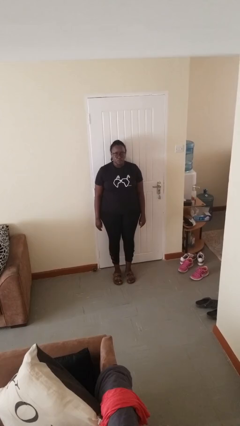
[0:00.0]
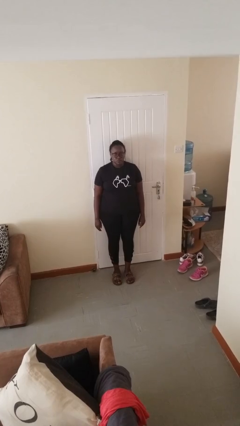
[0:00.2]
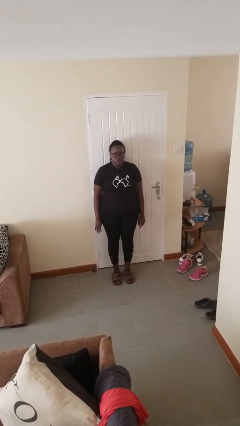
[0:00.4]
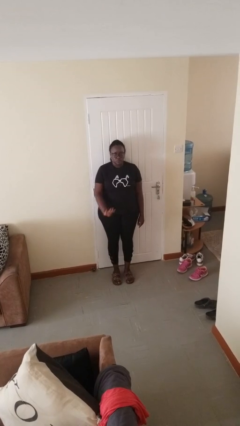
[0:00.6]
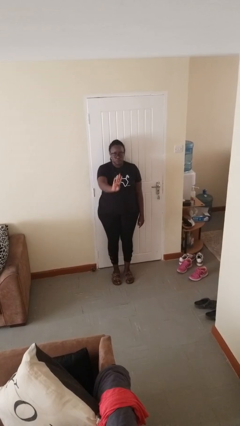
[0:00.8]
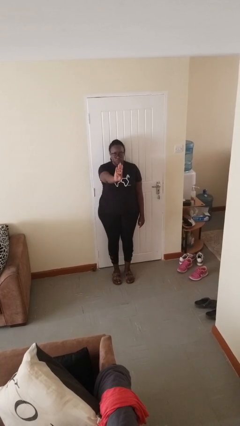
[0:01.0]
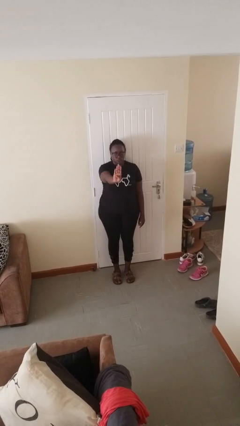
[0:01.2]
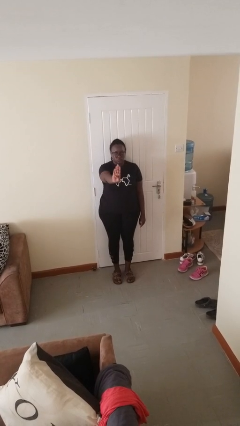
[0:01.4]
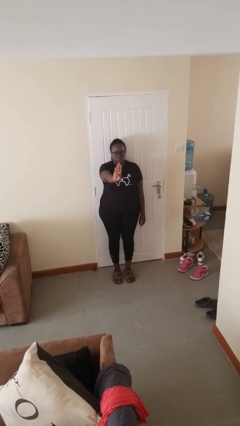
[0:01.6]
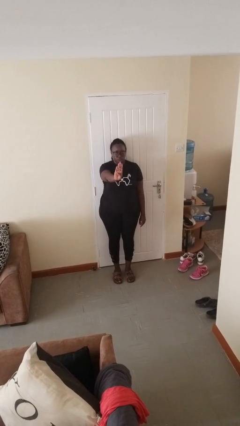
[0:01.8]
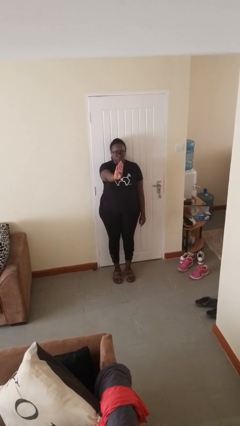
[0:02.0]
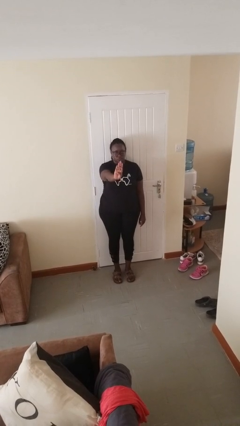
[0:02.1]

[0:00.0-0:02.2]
person gestures number four

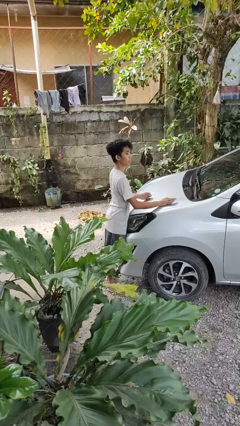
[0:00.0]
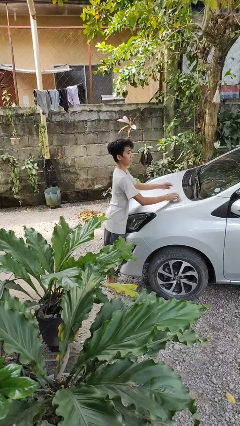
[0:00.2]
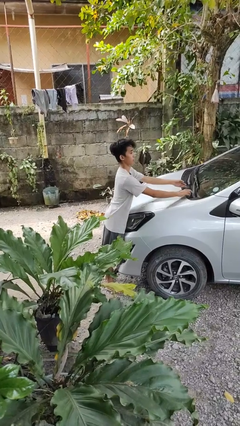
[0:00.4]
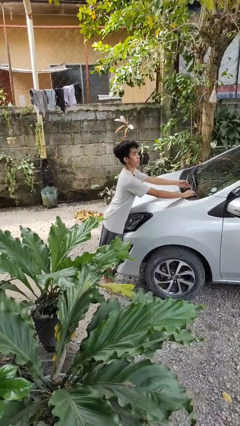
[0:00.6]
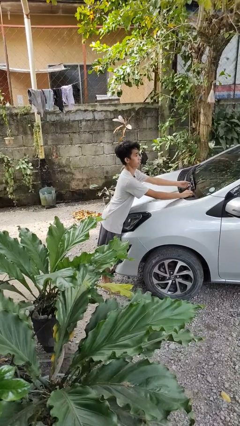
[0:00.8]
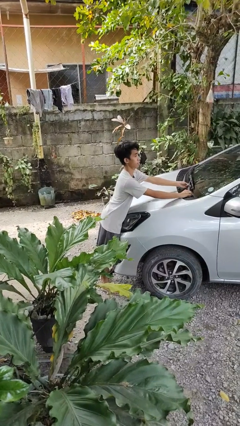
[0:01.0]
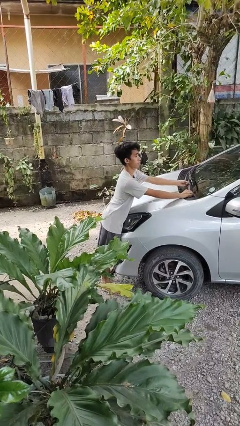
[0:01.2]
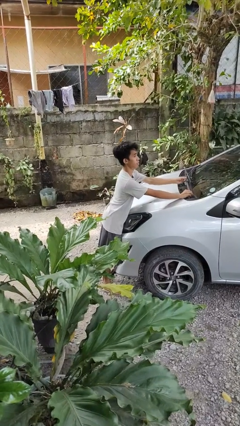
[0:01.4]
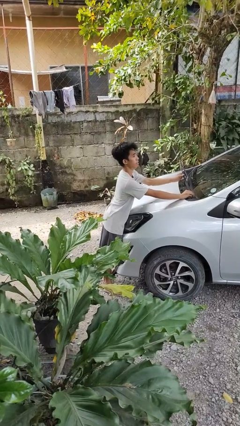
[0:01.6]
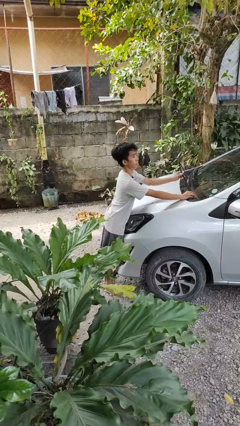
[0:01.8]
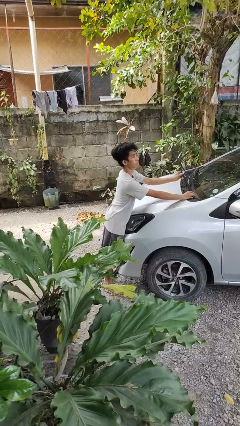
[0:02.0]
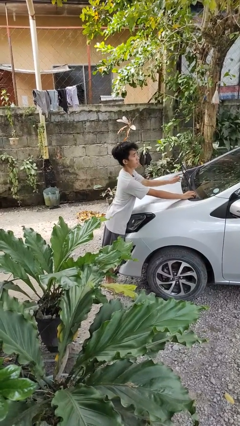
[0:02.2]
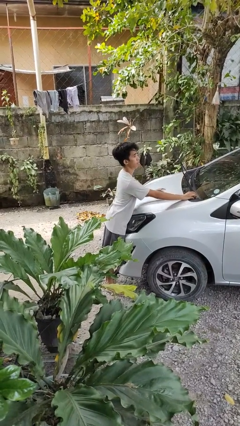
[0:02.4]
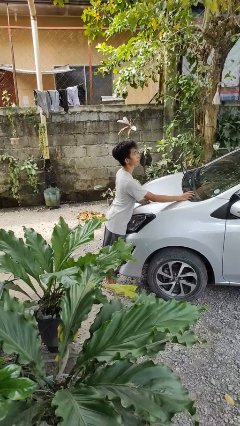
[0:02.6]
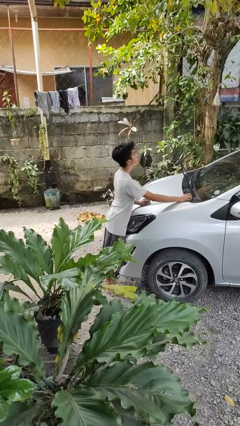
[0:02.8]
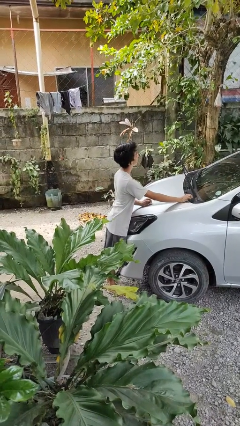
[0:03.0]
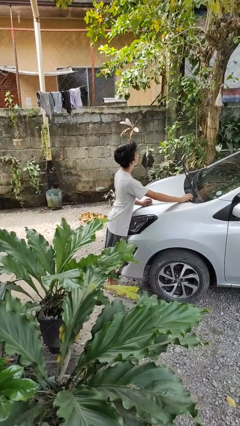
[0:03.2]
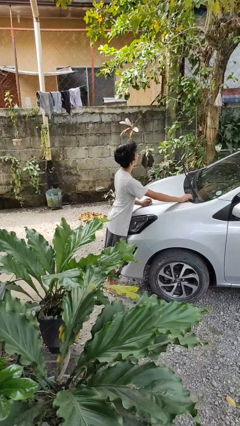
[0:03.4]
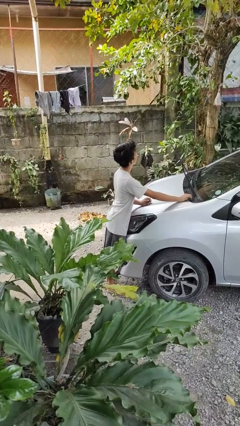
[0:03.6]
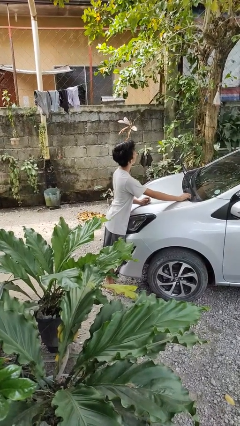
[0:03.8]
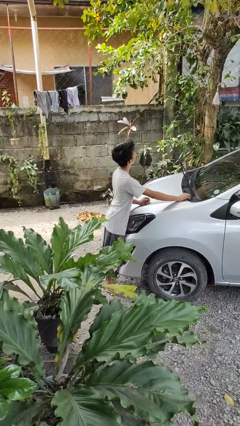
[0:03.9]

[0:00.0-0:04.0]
person flips up car wipers

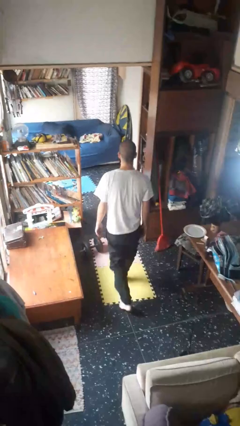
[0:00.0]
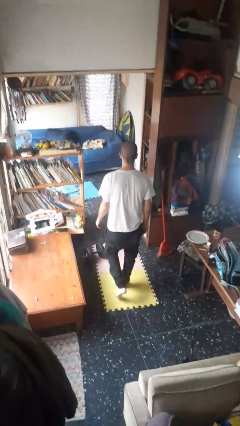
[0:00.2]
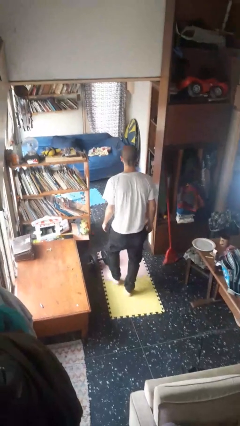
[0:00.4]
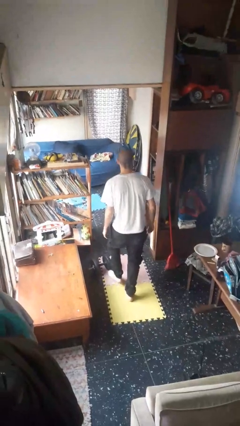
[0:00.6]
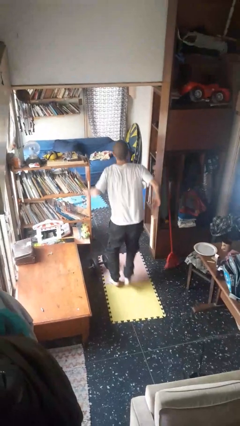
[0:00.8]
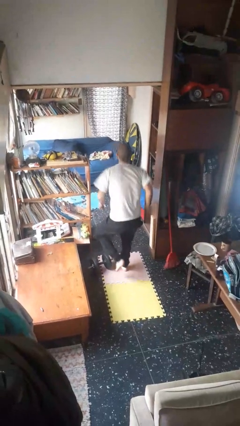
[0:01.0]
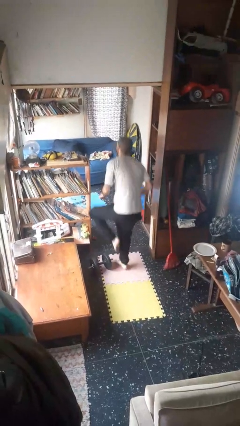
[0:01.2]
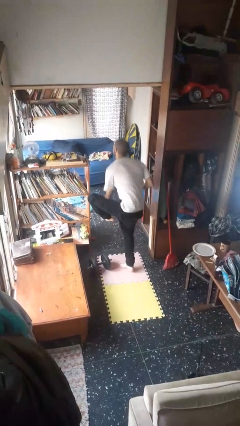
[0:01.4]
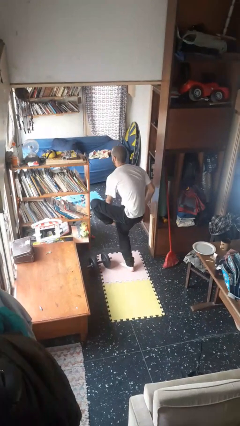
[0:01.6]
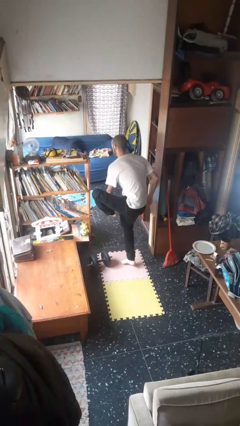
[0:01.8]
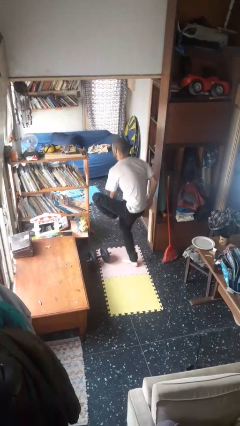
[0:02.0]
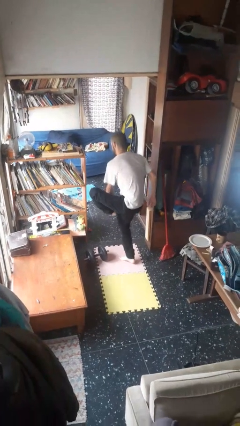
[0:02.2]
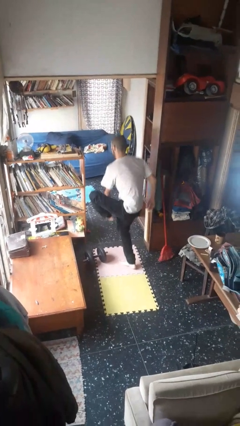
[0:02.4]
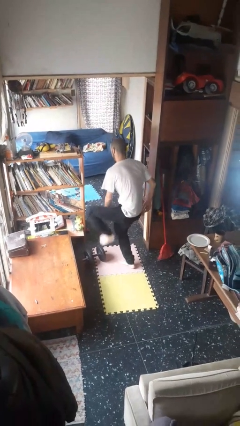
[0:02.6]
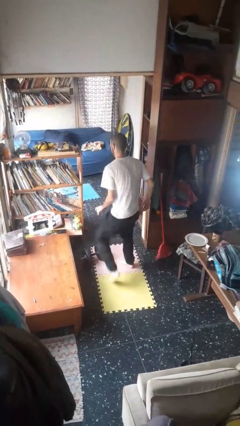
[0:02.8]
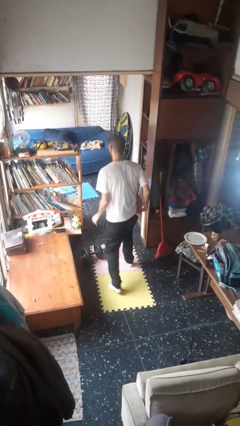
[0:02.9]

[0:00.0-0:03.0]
person stubs toe

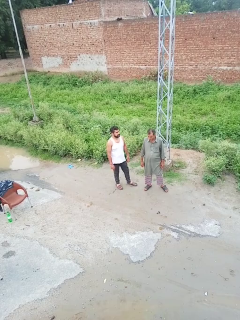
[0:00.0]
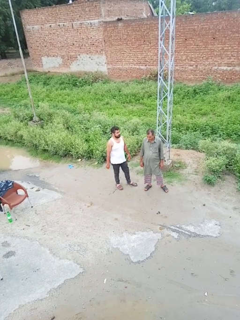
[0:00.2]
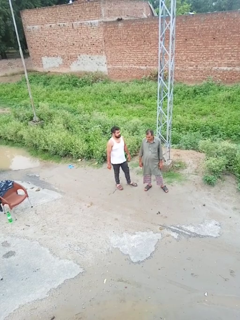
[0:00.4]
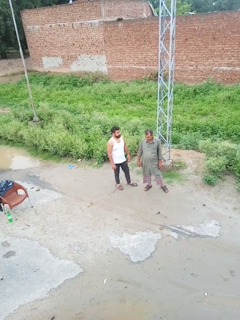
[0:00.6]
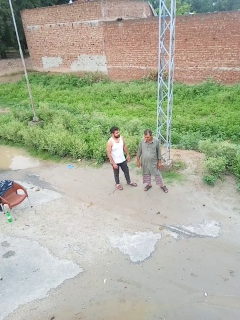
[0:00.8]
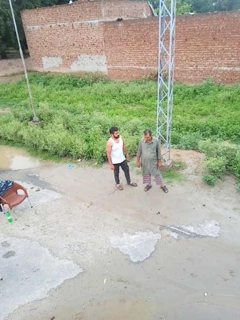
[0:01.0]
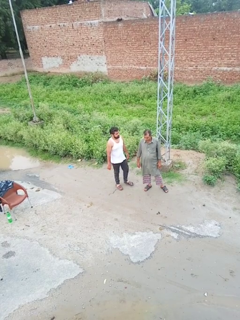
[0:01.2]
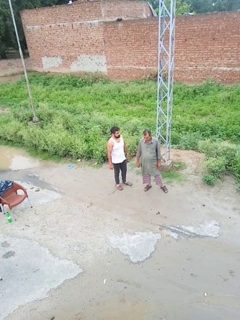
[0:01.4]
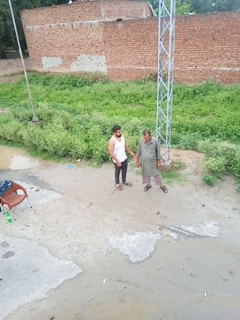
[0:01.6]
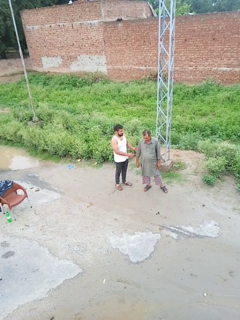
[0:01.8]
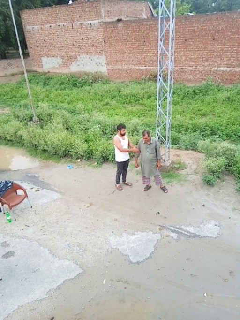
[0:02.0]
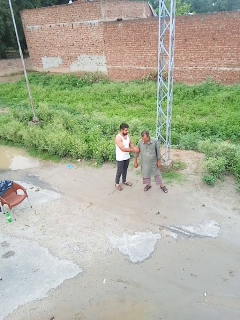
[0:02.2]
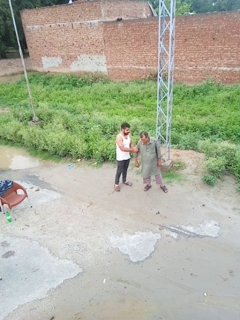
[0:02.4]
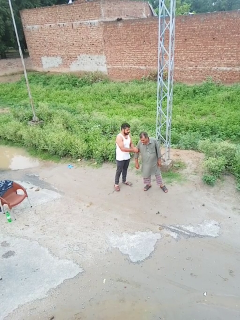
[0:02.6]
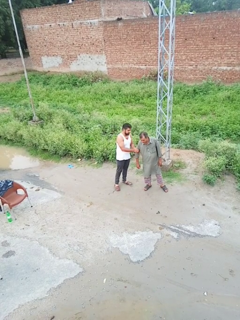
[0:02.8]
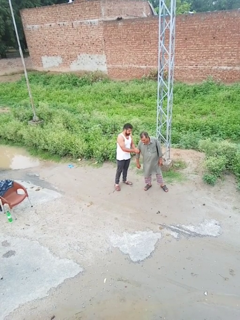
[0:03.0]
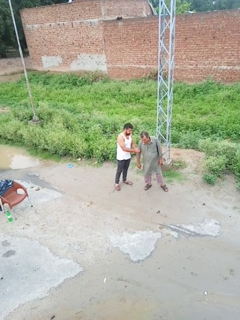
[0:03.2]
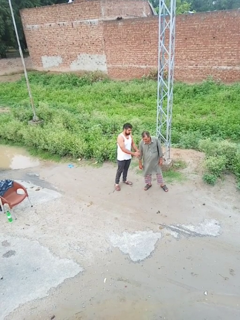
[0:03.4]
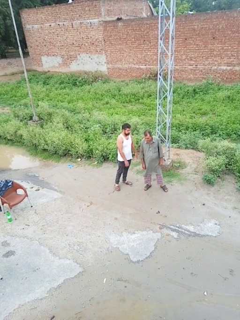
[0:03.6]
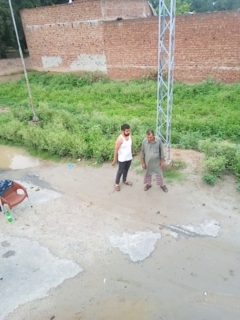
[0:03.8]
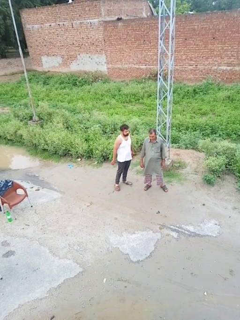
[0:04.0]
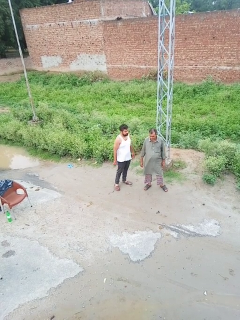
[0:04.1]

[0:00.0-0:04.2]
person grabs person by forearm

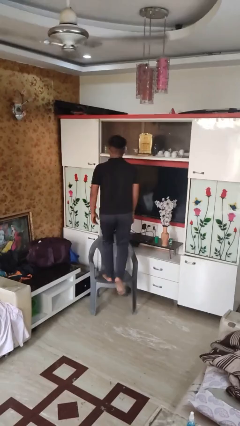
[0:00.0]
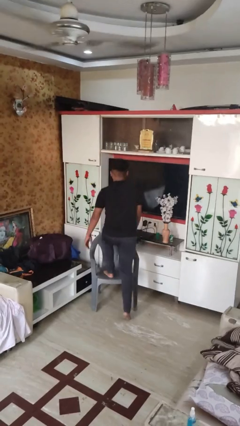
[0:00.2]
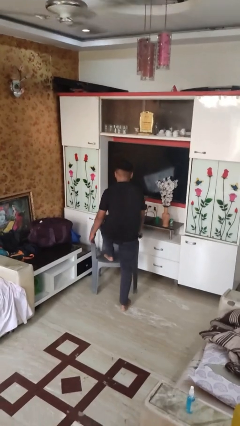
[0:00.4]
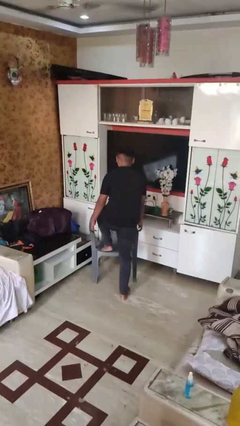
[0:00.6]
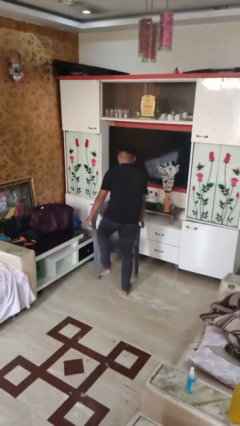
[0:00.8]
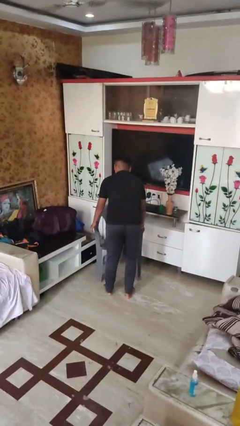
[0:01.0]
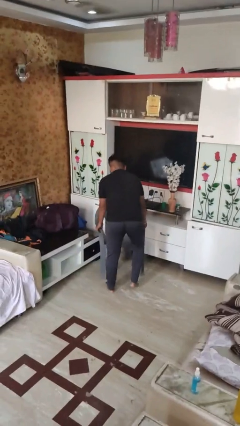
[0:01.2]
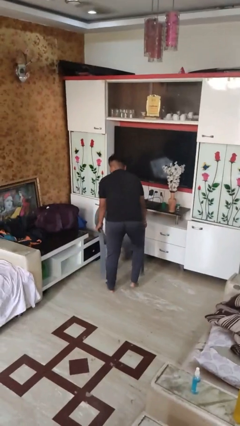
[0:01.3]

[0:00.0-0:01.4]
person climbs off chair

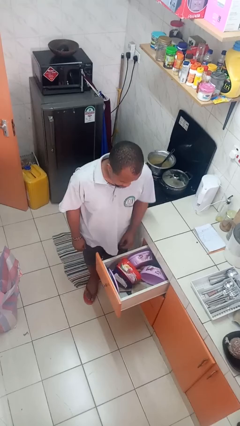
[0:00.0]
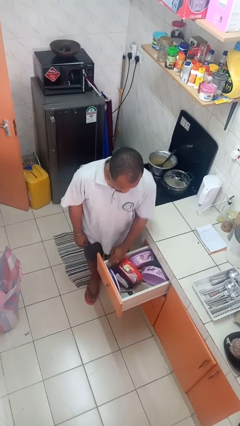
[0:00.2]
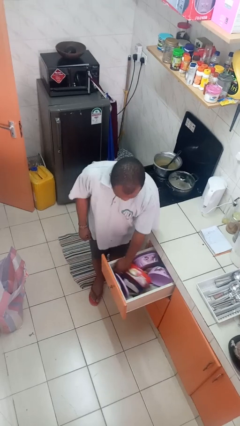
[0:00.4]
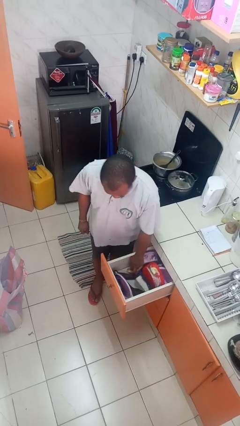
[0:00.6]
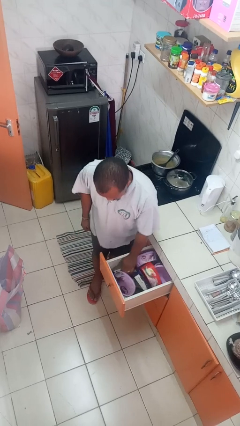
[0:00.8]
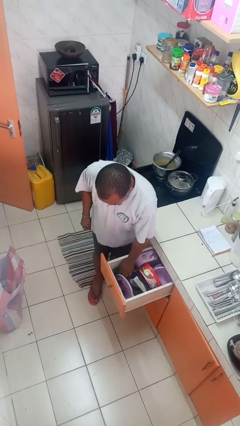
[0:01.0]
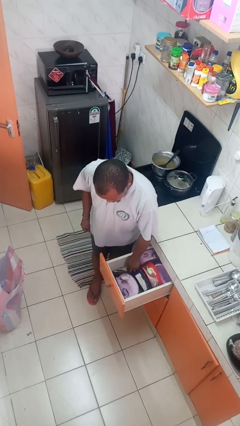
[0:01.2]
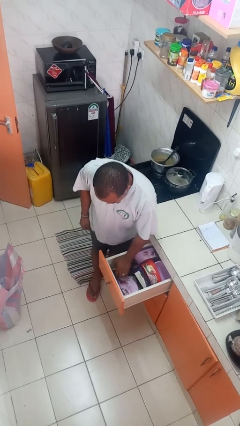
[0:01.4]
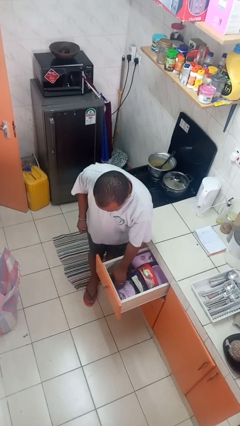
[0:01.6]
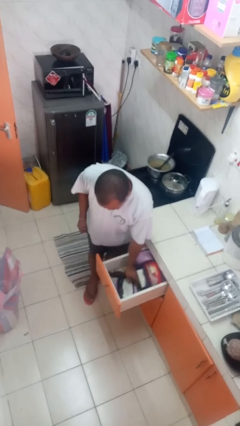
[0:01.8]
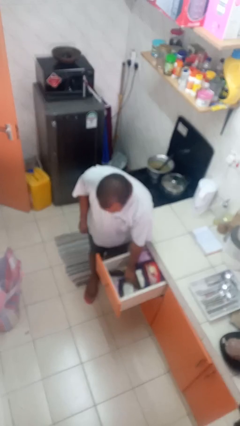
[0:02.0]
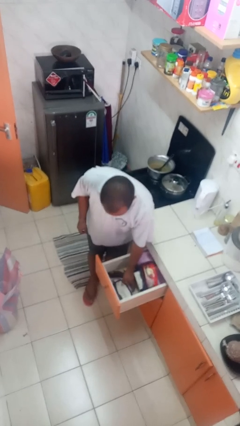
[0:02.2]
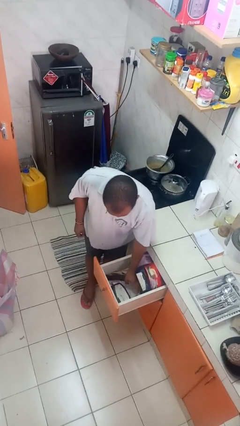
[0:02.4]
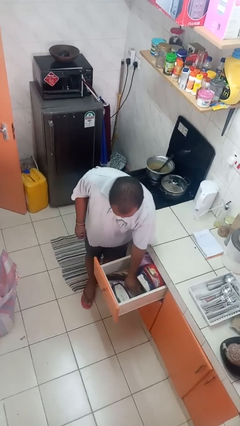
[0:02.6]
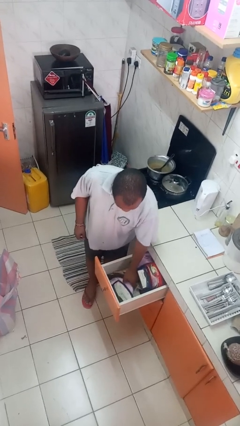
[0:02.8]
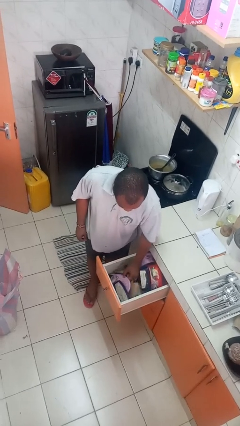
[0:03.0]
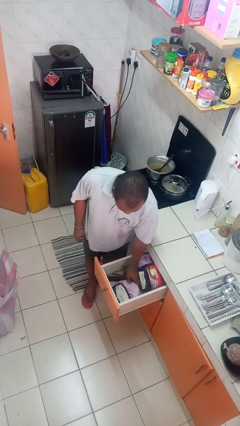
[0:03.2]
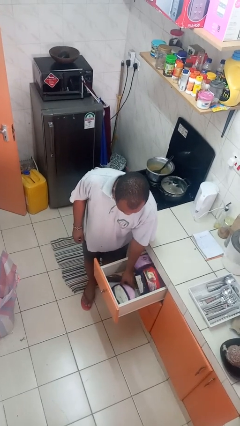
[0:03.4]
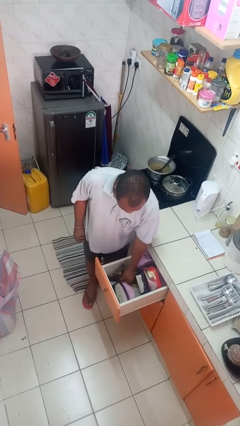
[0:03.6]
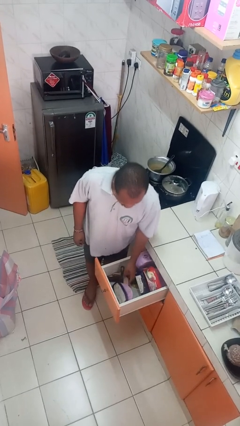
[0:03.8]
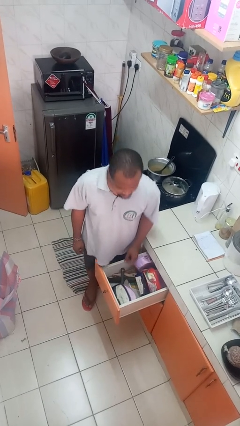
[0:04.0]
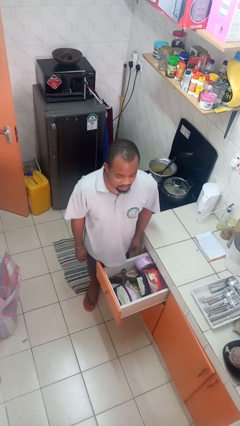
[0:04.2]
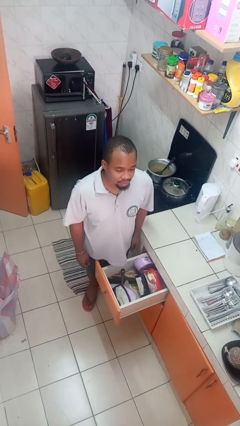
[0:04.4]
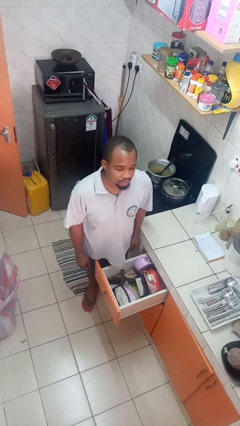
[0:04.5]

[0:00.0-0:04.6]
person searches in kitchen drawer
